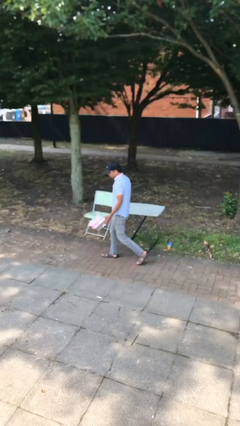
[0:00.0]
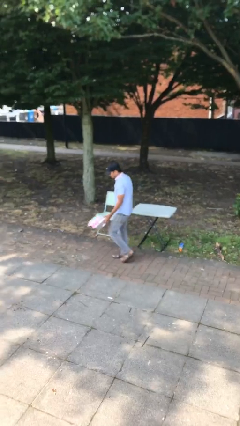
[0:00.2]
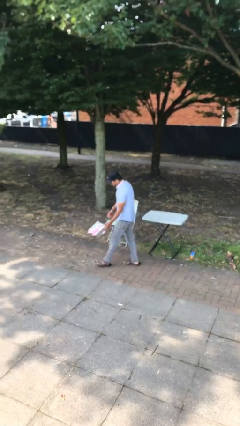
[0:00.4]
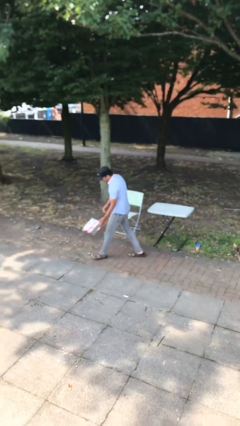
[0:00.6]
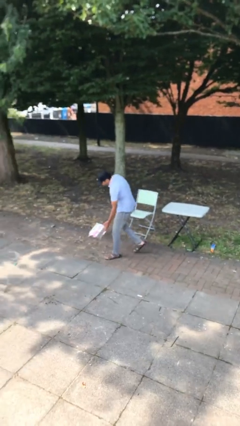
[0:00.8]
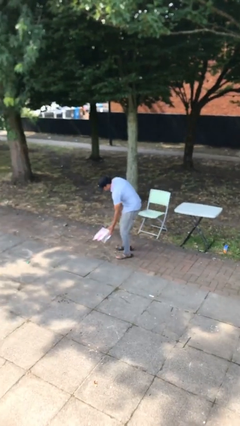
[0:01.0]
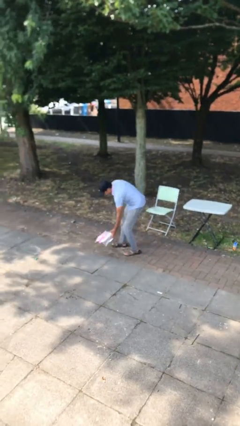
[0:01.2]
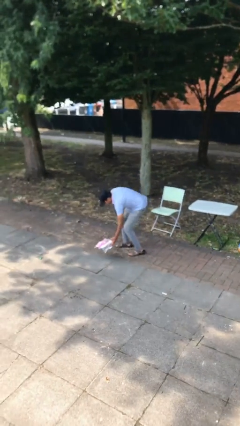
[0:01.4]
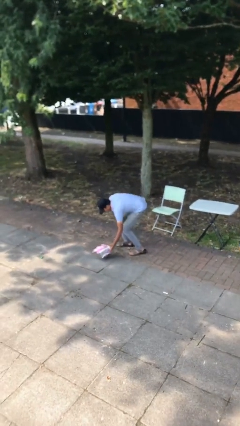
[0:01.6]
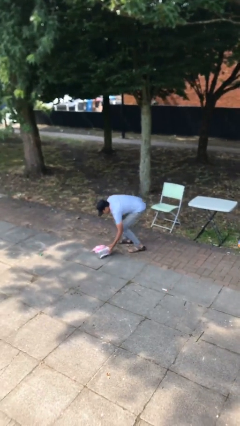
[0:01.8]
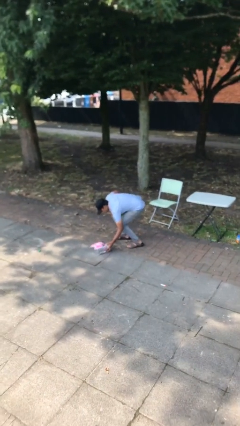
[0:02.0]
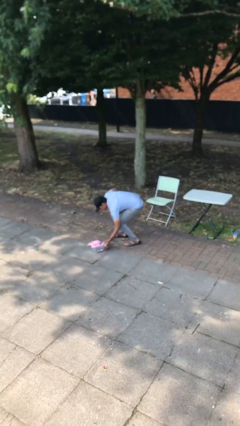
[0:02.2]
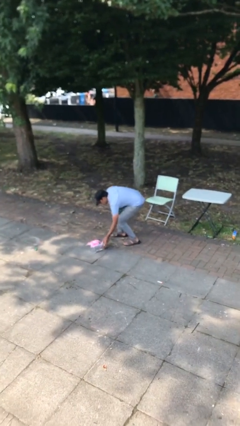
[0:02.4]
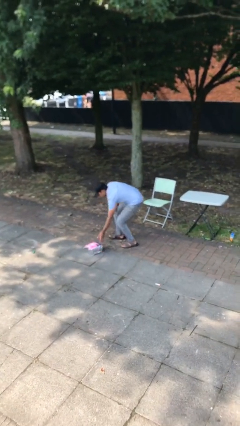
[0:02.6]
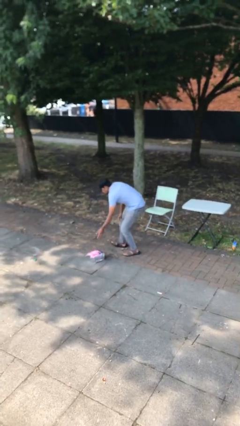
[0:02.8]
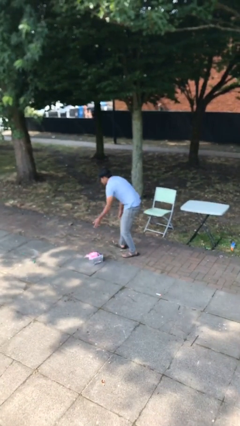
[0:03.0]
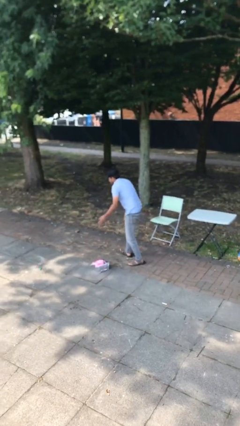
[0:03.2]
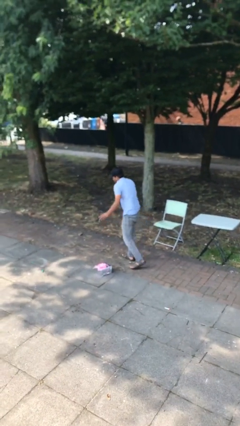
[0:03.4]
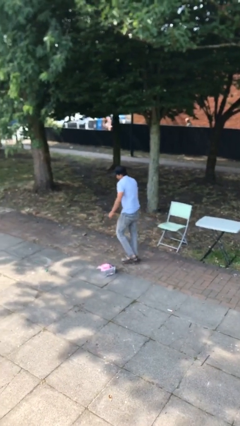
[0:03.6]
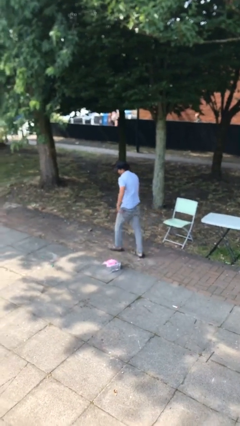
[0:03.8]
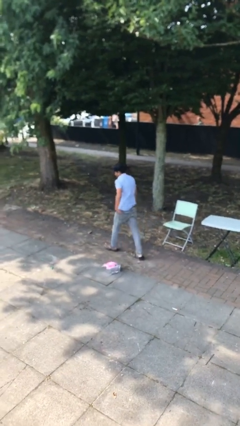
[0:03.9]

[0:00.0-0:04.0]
person puts down object on floor

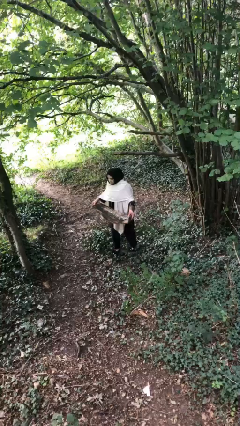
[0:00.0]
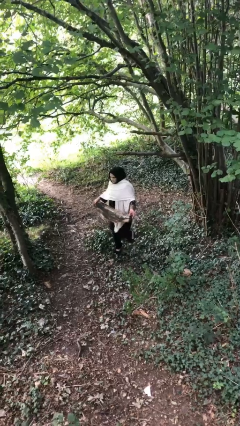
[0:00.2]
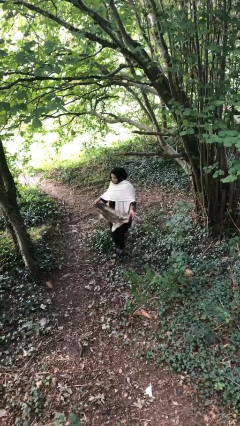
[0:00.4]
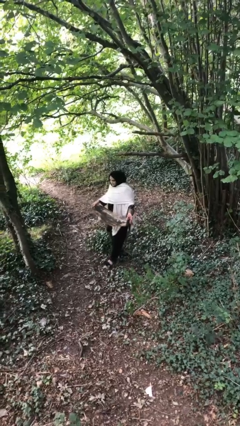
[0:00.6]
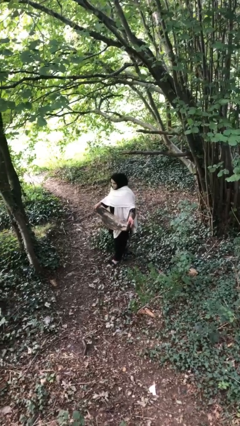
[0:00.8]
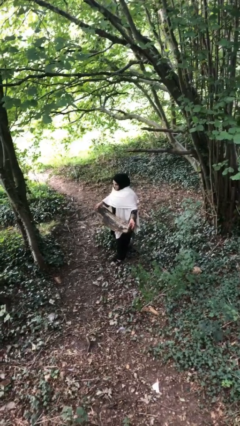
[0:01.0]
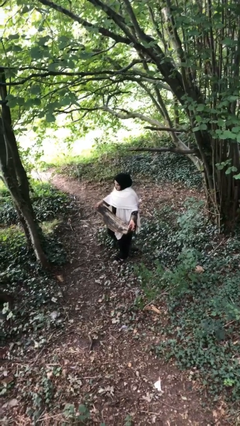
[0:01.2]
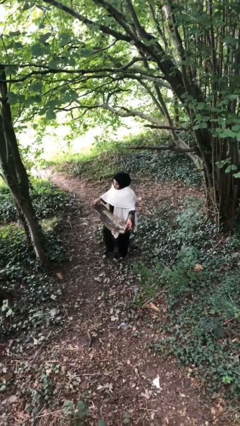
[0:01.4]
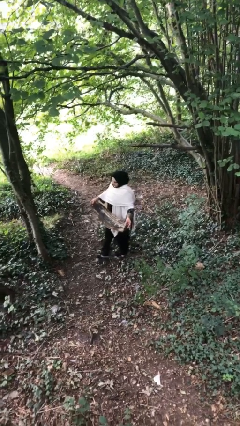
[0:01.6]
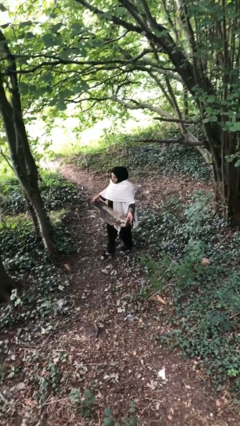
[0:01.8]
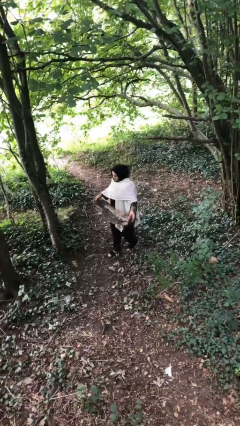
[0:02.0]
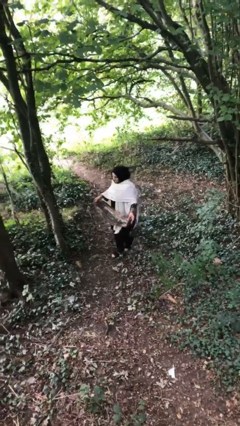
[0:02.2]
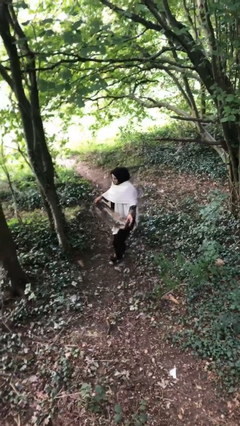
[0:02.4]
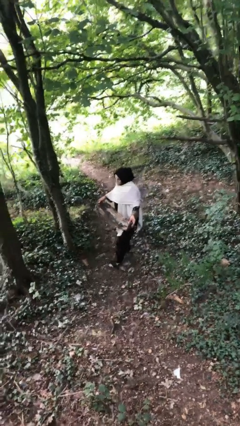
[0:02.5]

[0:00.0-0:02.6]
person carries heavy object

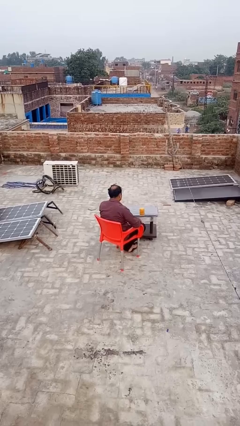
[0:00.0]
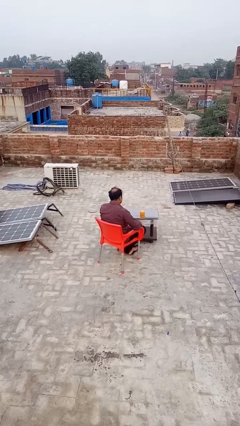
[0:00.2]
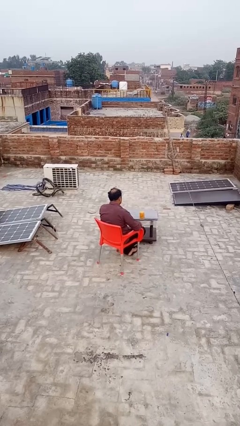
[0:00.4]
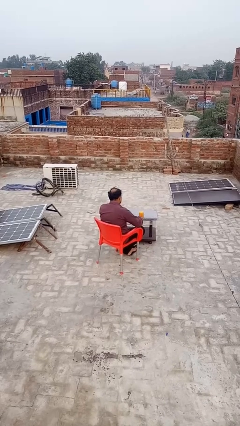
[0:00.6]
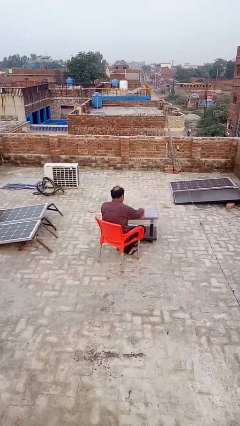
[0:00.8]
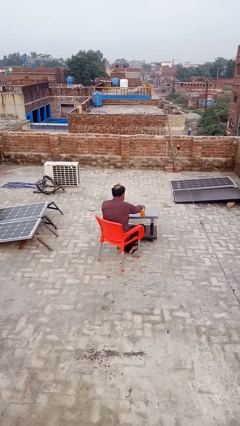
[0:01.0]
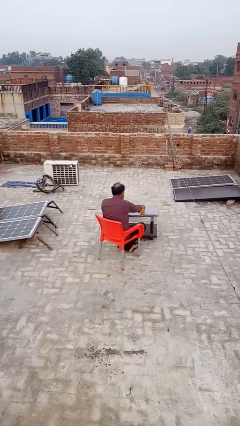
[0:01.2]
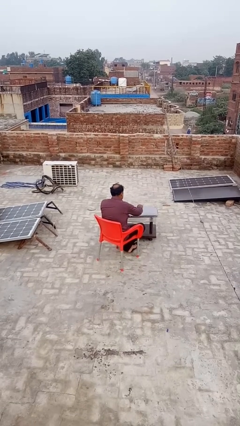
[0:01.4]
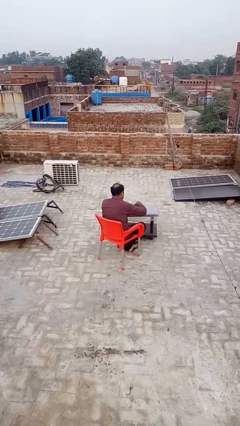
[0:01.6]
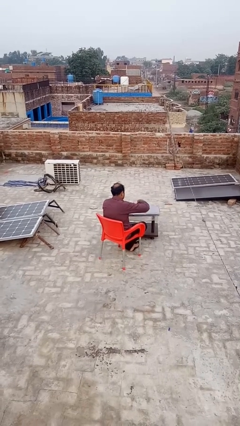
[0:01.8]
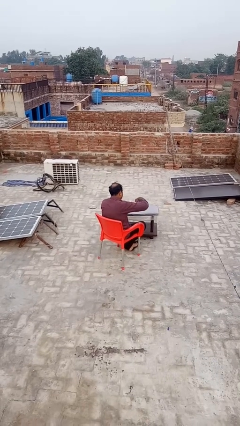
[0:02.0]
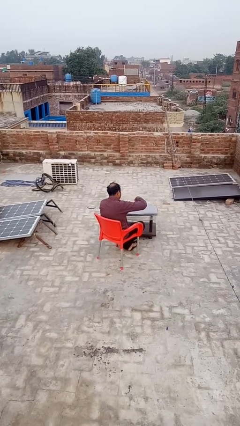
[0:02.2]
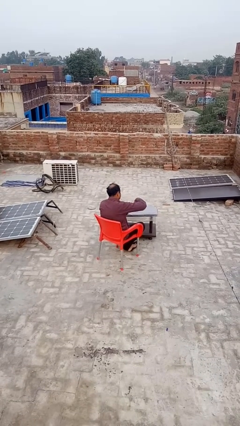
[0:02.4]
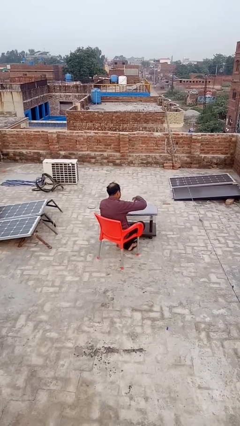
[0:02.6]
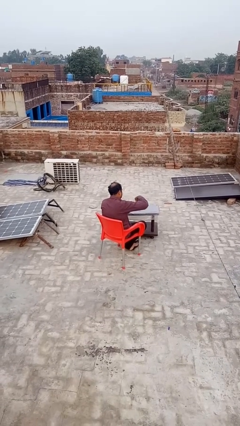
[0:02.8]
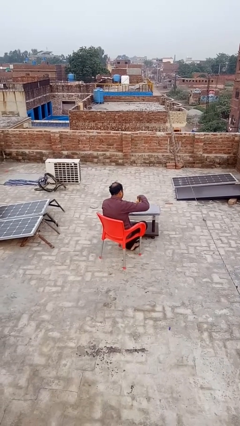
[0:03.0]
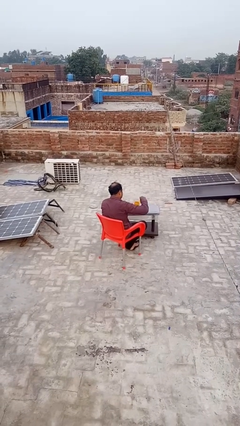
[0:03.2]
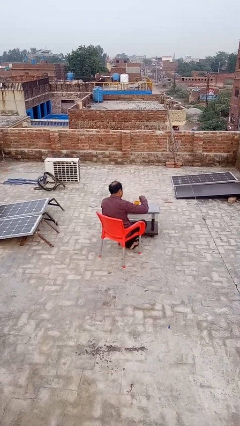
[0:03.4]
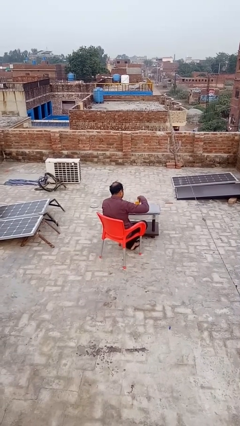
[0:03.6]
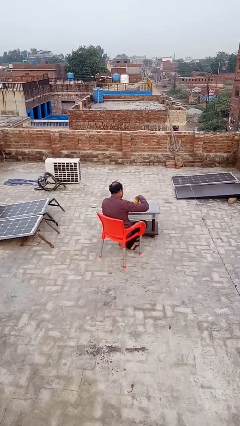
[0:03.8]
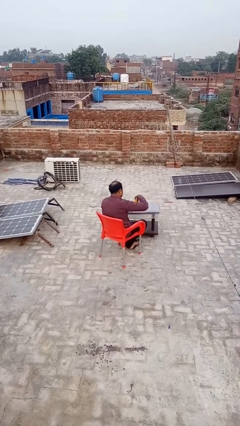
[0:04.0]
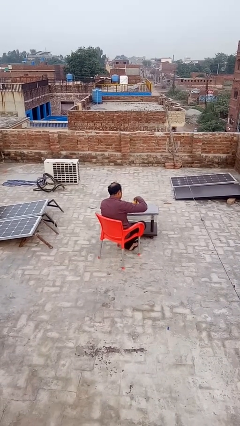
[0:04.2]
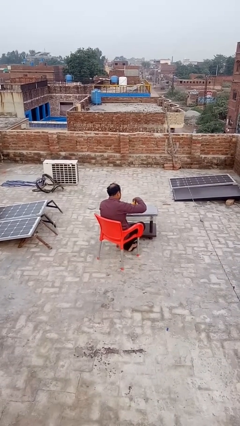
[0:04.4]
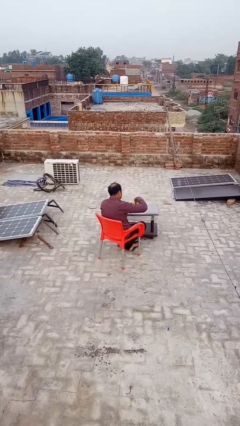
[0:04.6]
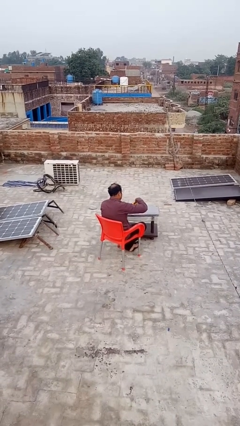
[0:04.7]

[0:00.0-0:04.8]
person opens jar

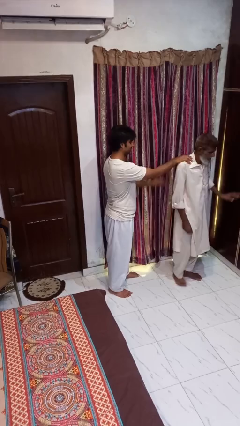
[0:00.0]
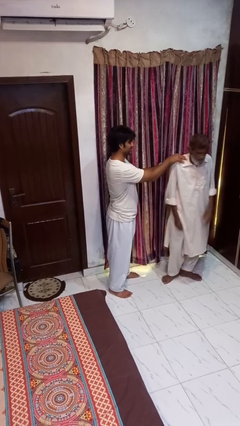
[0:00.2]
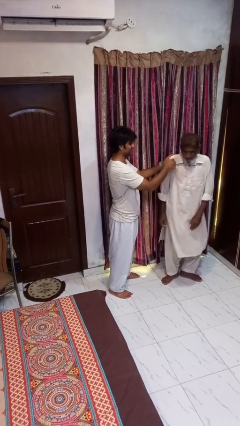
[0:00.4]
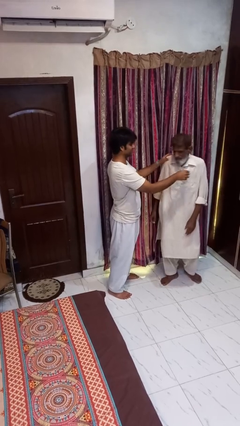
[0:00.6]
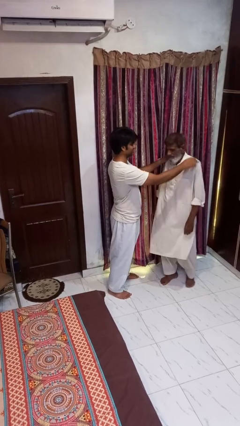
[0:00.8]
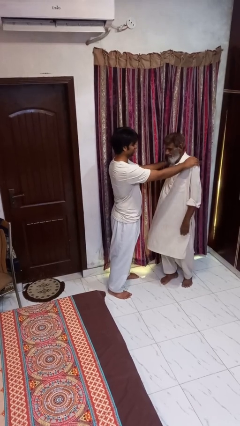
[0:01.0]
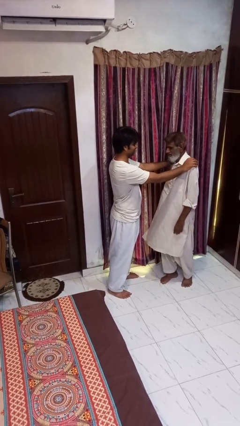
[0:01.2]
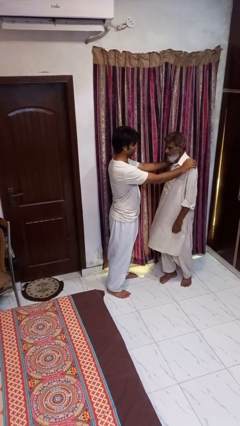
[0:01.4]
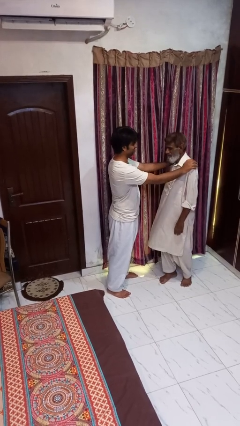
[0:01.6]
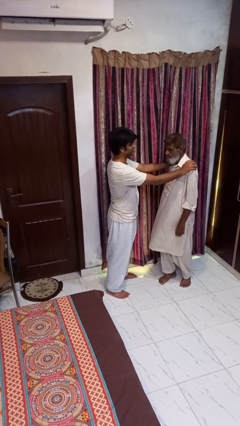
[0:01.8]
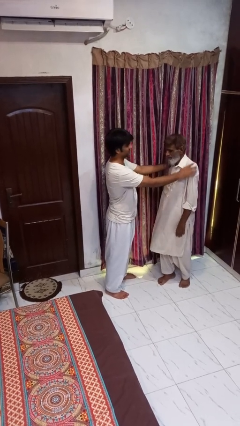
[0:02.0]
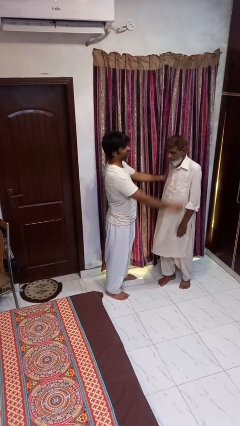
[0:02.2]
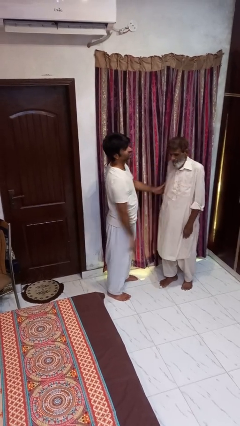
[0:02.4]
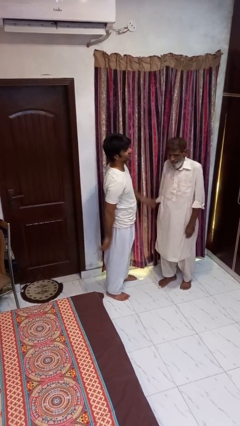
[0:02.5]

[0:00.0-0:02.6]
person spins person around

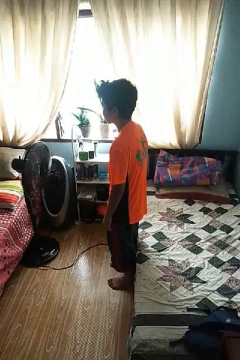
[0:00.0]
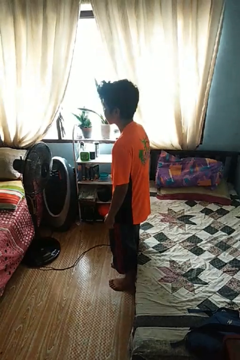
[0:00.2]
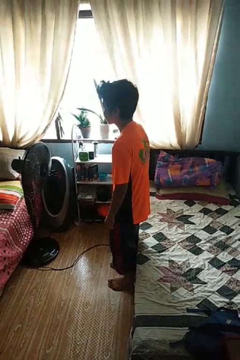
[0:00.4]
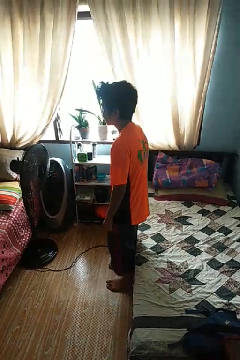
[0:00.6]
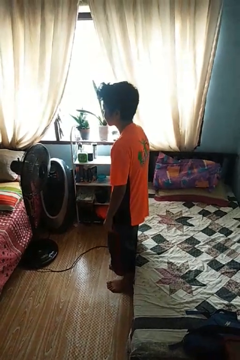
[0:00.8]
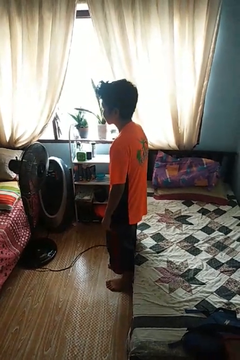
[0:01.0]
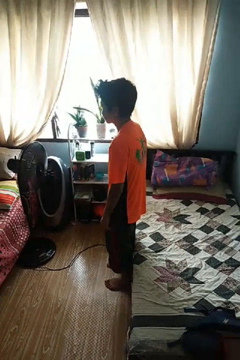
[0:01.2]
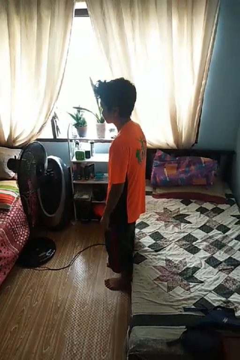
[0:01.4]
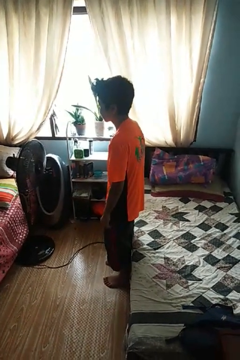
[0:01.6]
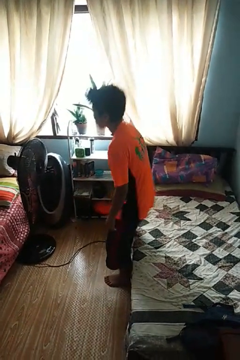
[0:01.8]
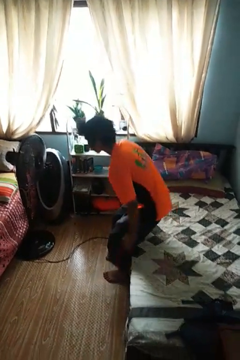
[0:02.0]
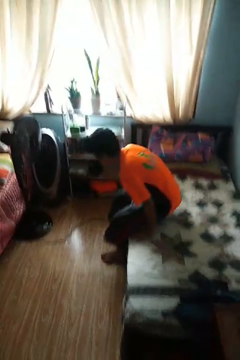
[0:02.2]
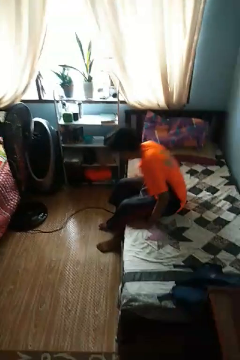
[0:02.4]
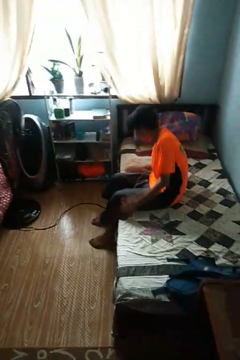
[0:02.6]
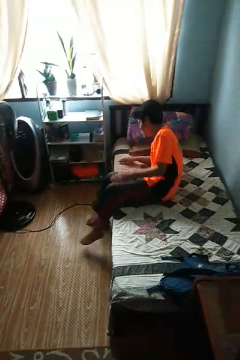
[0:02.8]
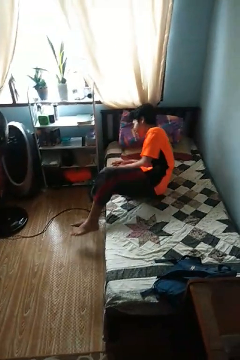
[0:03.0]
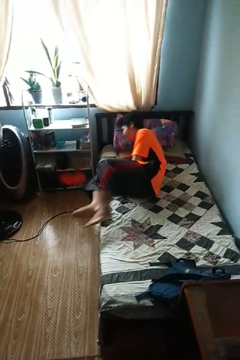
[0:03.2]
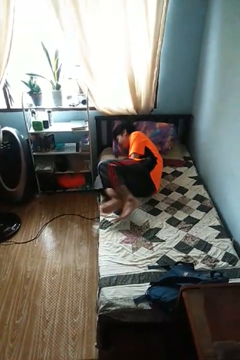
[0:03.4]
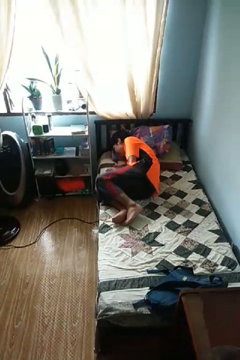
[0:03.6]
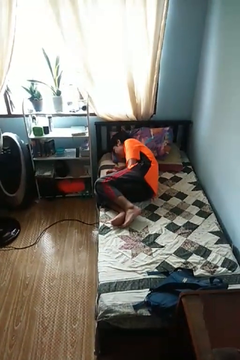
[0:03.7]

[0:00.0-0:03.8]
person lies down on bed

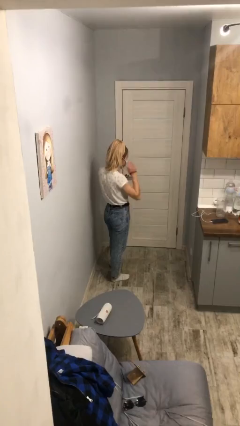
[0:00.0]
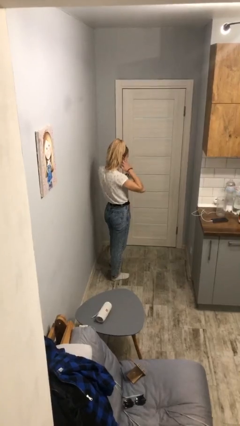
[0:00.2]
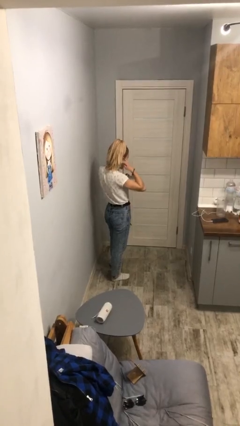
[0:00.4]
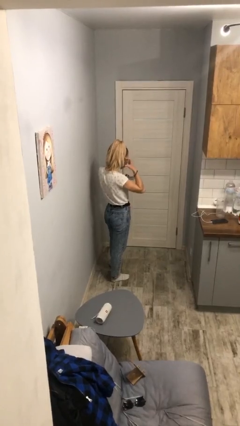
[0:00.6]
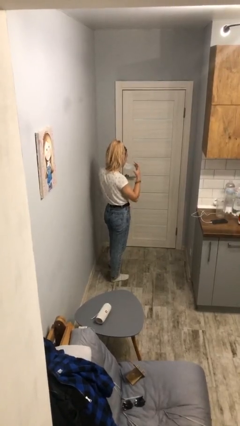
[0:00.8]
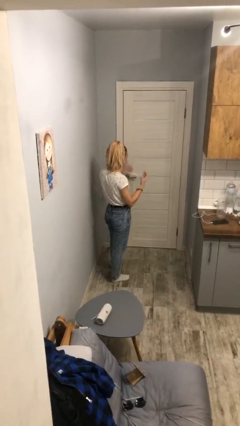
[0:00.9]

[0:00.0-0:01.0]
person takes off facemask
